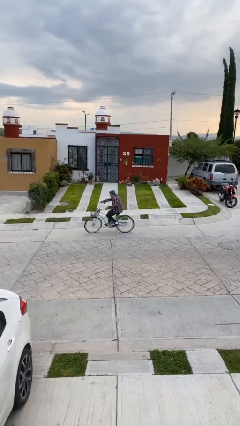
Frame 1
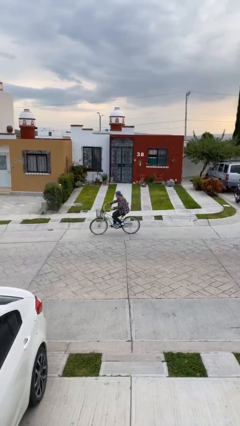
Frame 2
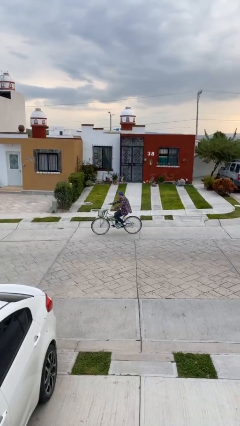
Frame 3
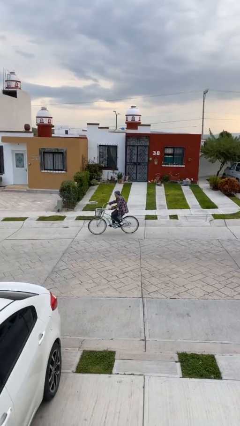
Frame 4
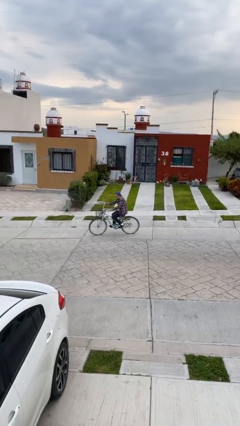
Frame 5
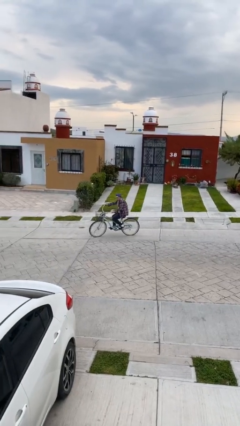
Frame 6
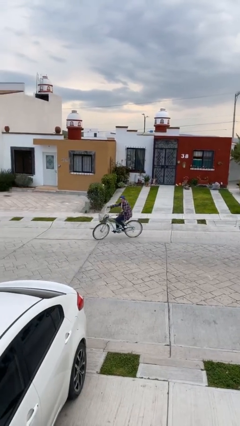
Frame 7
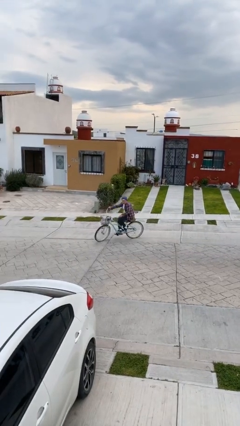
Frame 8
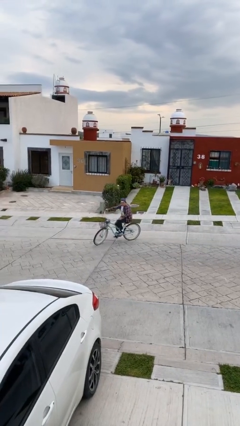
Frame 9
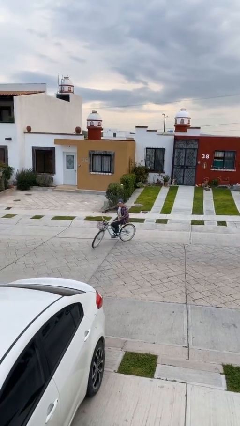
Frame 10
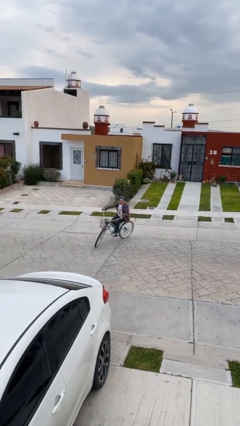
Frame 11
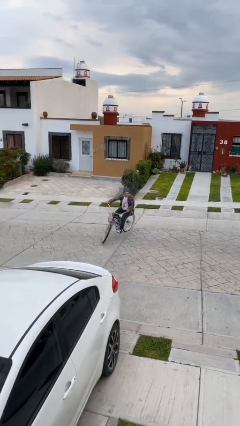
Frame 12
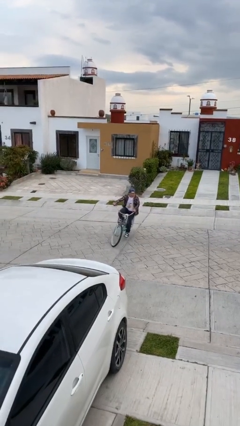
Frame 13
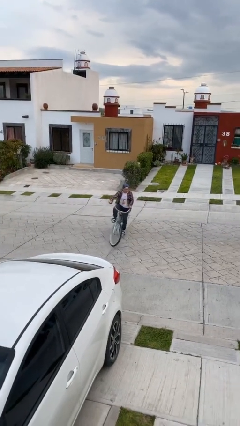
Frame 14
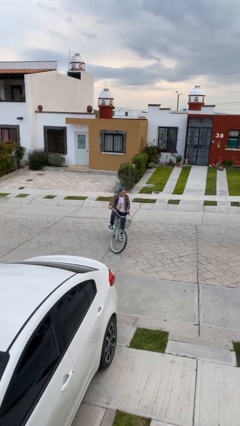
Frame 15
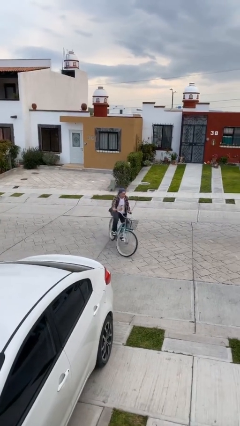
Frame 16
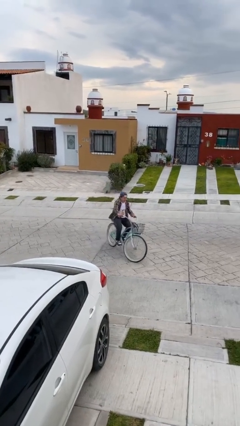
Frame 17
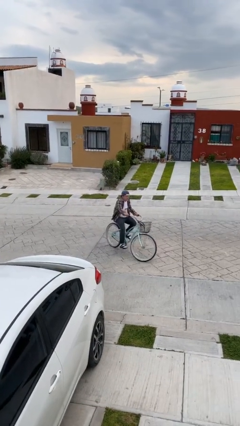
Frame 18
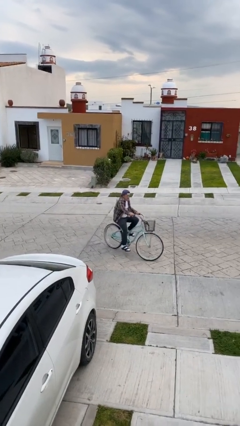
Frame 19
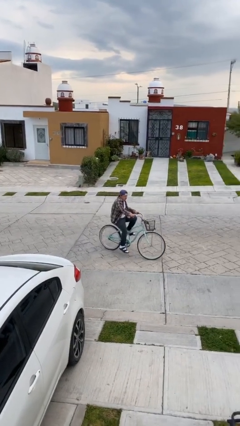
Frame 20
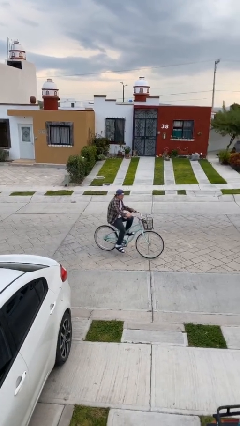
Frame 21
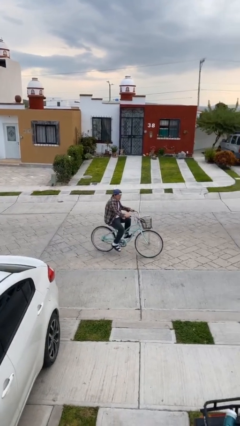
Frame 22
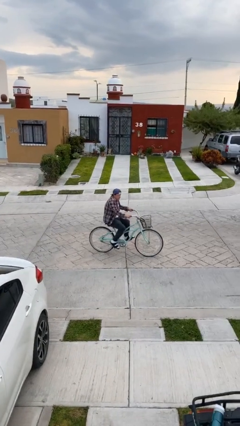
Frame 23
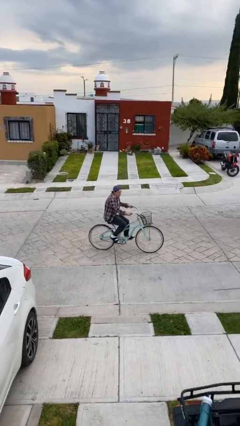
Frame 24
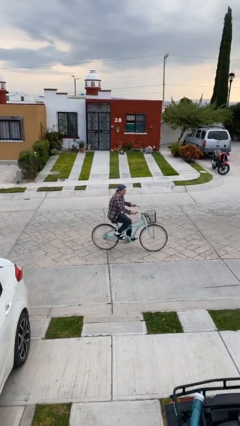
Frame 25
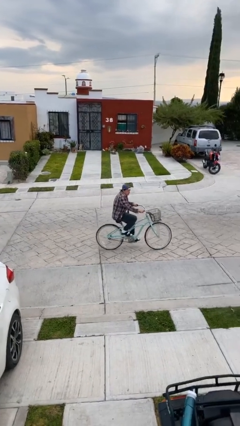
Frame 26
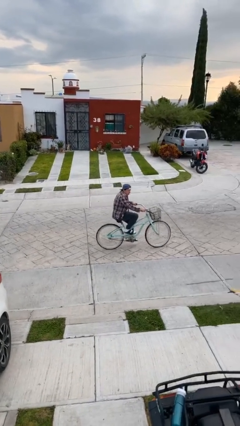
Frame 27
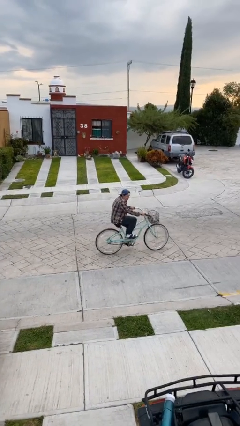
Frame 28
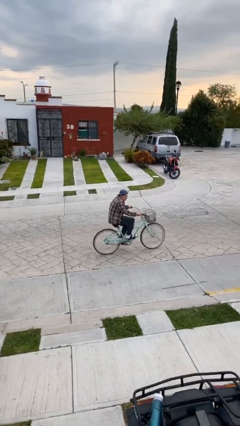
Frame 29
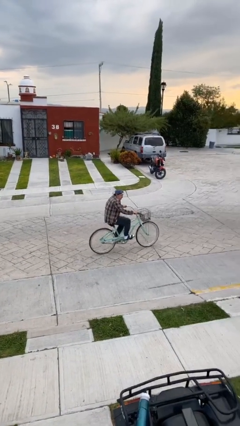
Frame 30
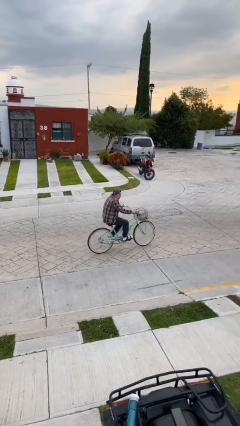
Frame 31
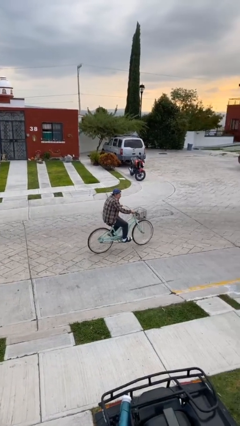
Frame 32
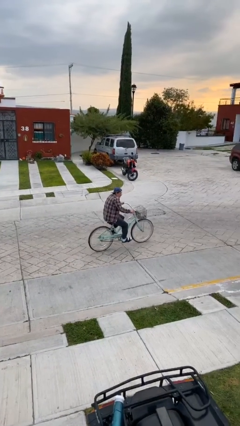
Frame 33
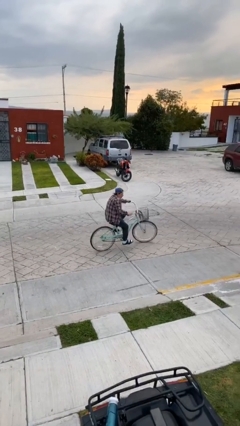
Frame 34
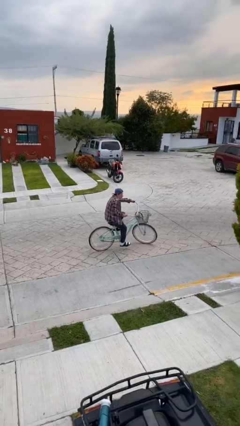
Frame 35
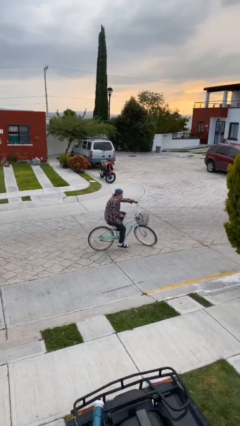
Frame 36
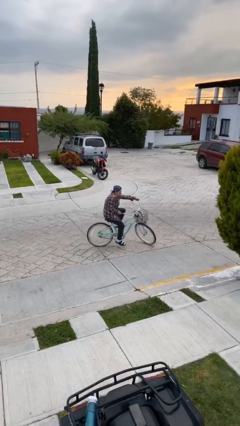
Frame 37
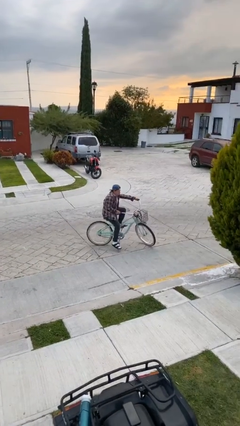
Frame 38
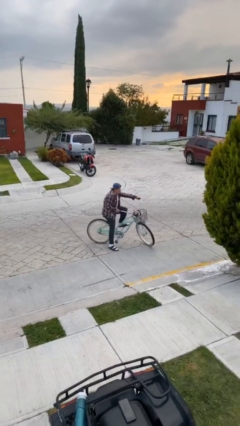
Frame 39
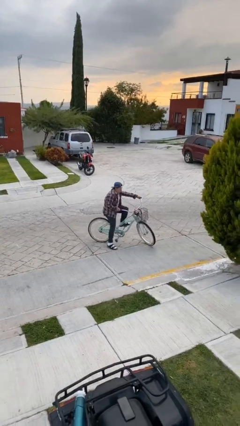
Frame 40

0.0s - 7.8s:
person rides bicycle

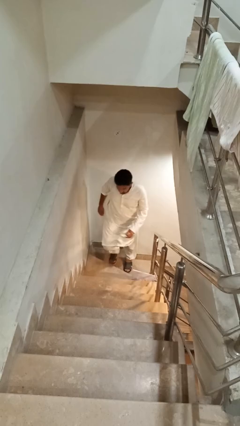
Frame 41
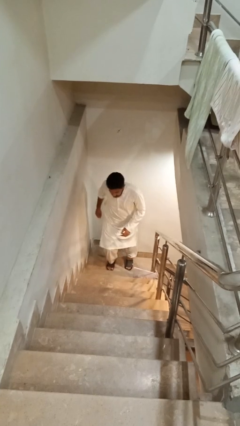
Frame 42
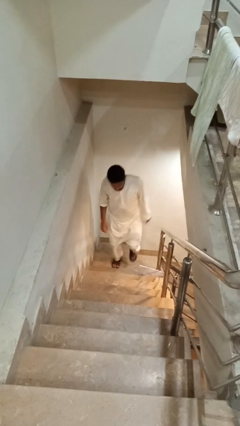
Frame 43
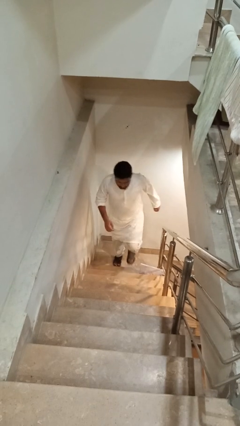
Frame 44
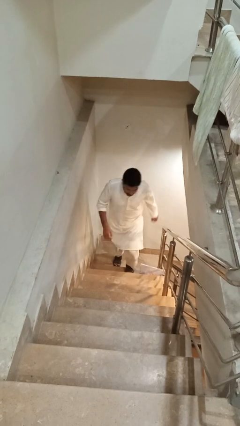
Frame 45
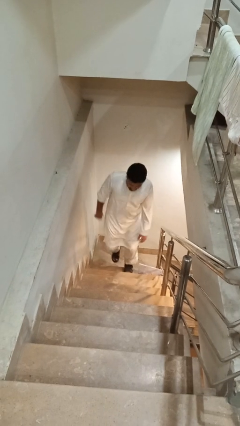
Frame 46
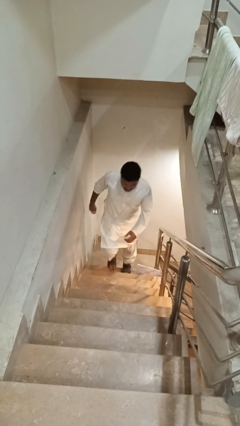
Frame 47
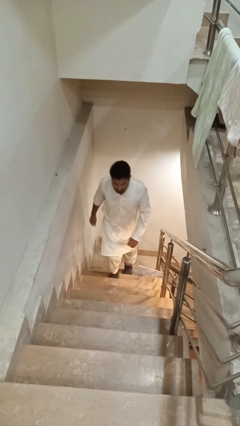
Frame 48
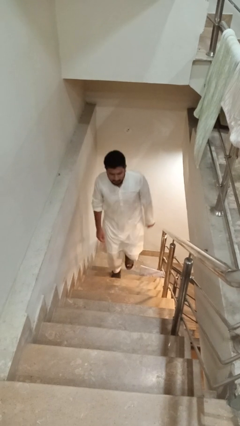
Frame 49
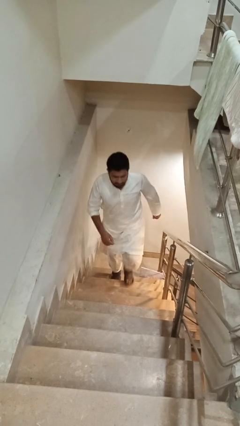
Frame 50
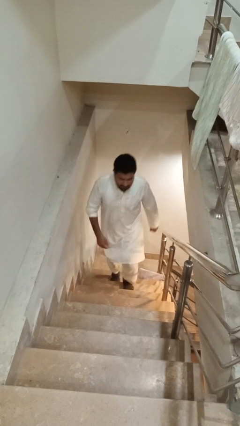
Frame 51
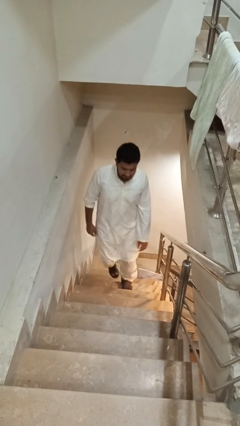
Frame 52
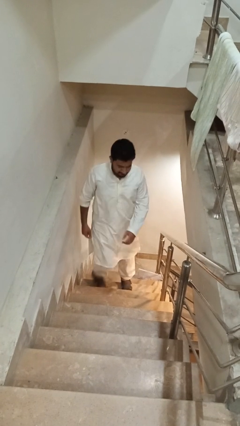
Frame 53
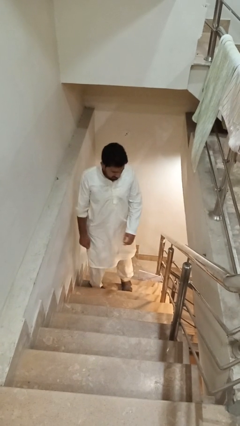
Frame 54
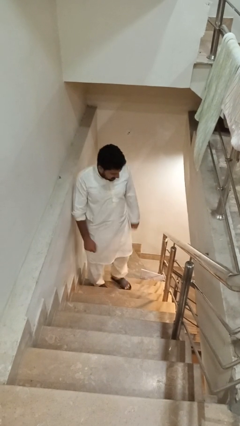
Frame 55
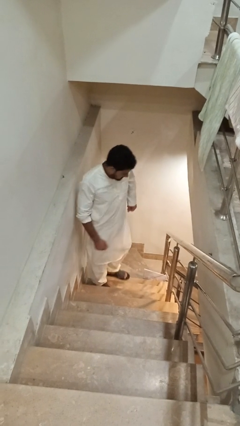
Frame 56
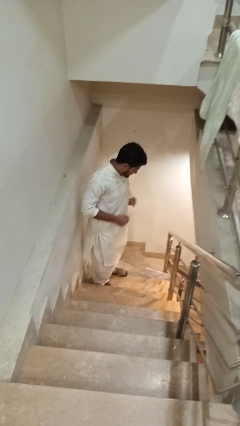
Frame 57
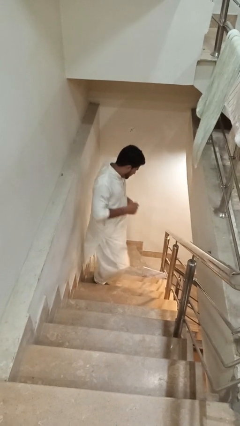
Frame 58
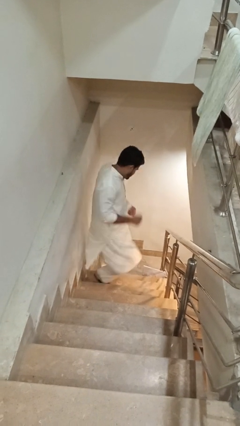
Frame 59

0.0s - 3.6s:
person climbs up stairs

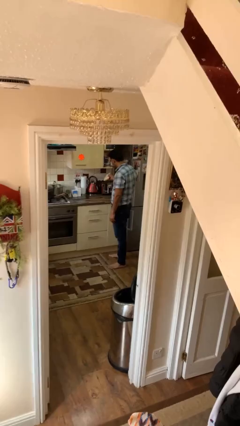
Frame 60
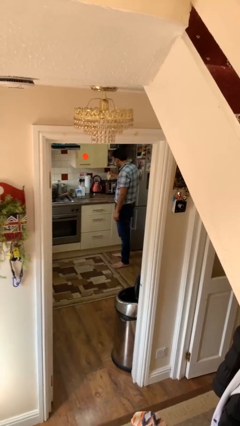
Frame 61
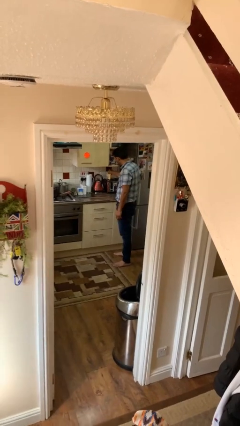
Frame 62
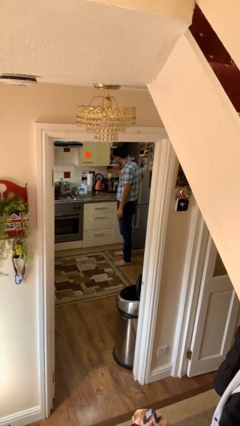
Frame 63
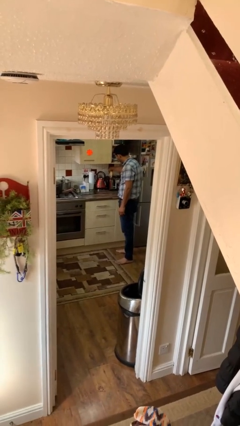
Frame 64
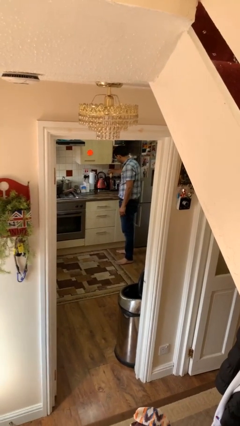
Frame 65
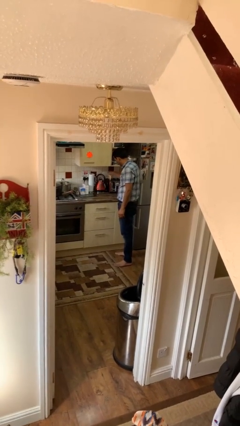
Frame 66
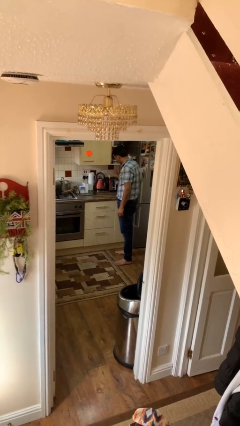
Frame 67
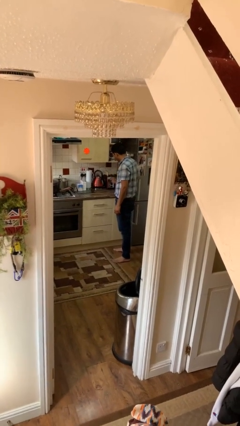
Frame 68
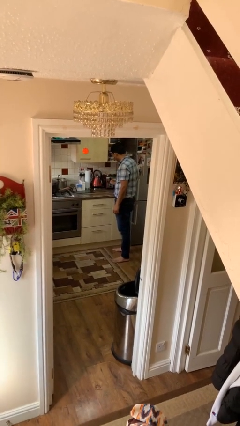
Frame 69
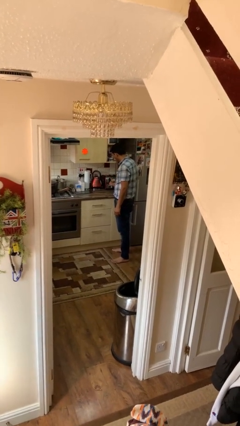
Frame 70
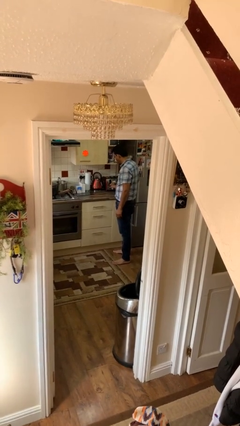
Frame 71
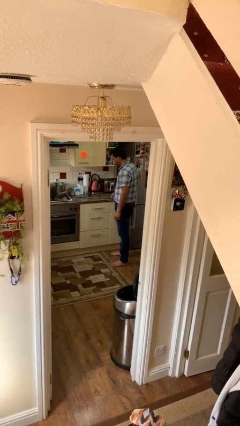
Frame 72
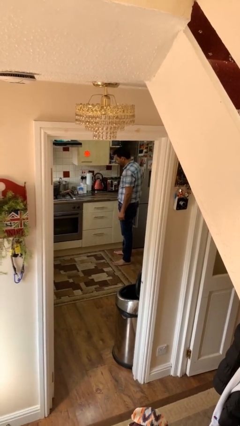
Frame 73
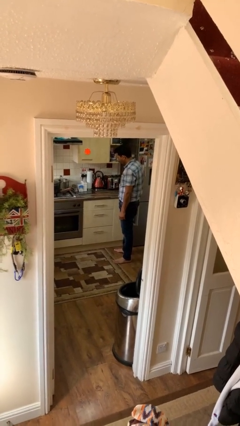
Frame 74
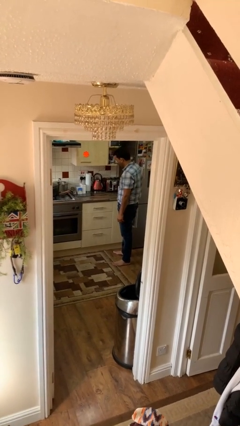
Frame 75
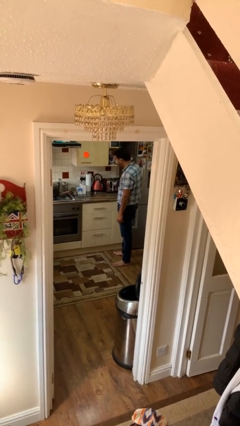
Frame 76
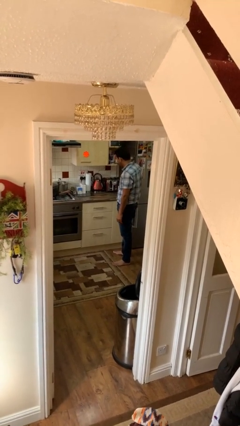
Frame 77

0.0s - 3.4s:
person puts object into toaster

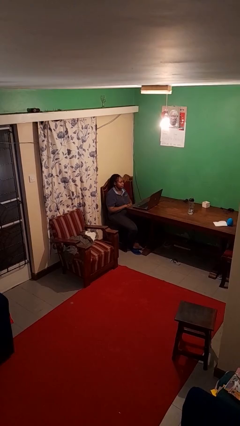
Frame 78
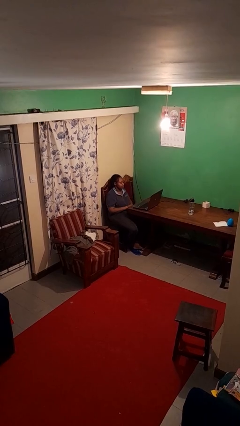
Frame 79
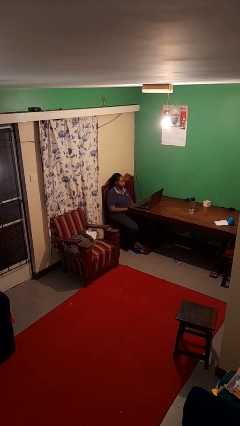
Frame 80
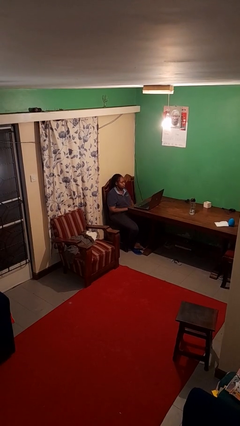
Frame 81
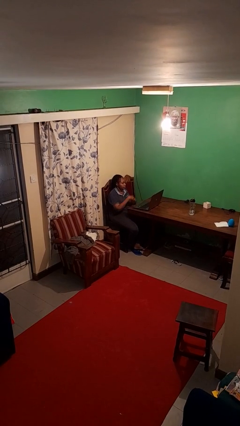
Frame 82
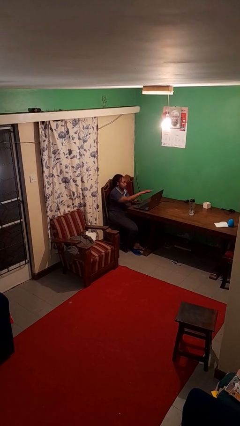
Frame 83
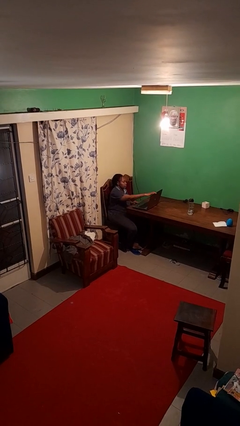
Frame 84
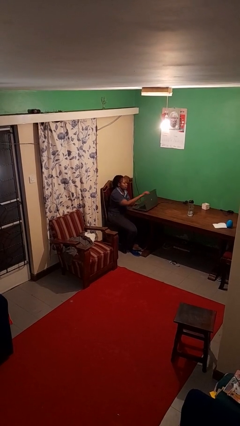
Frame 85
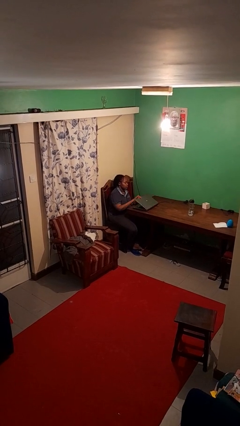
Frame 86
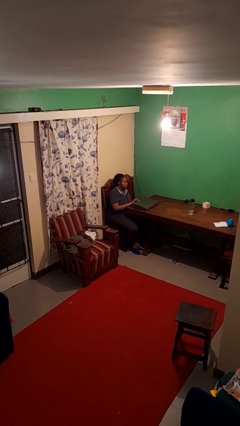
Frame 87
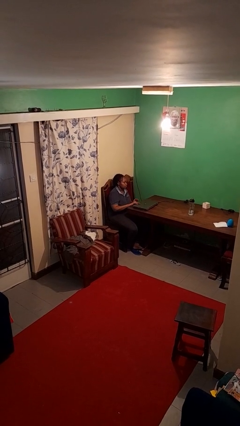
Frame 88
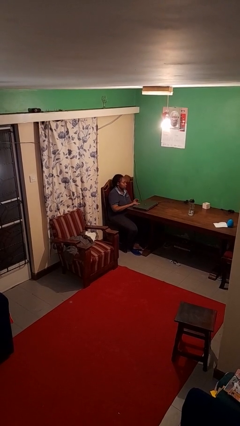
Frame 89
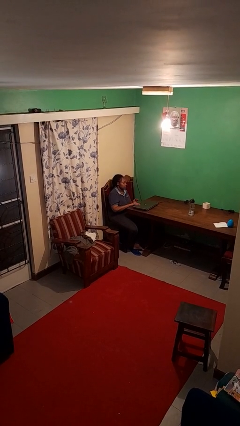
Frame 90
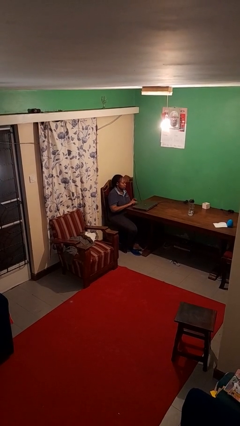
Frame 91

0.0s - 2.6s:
person closes laptop
